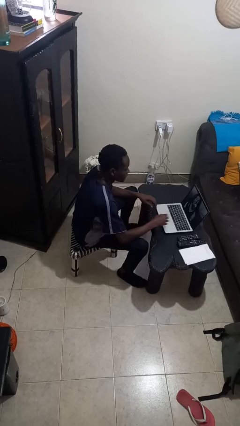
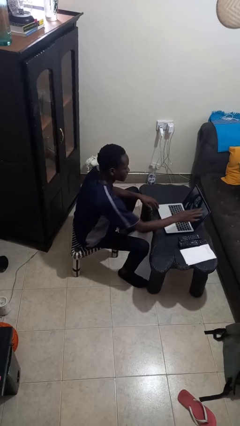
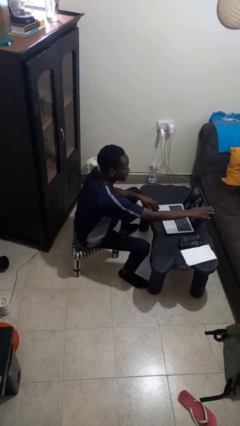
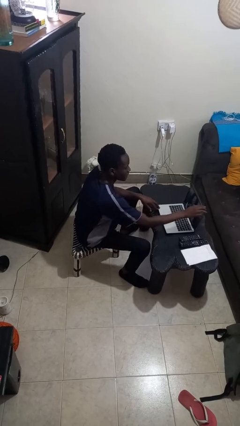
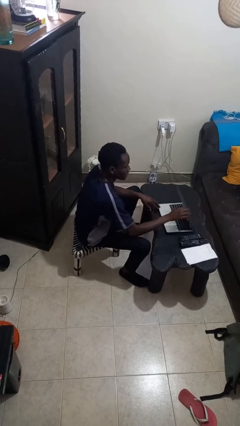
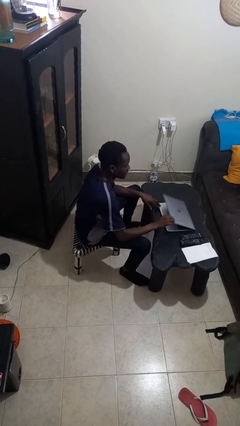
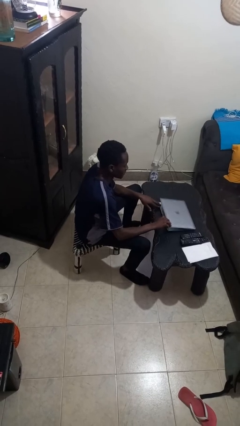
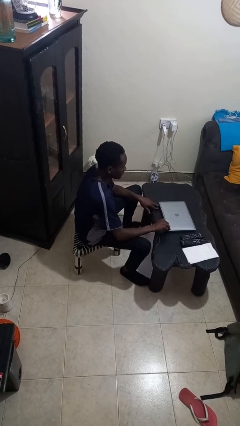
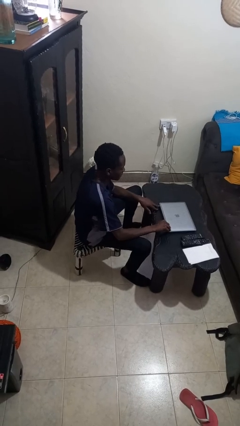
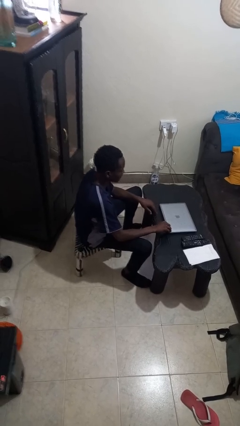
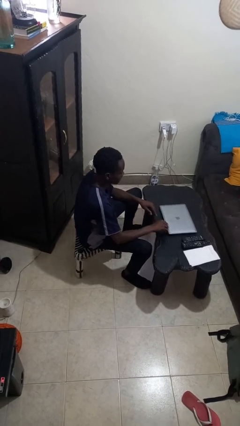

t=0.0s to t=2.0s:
person closes laptop

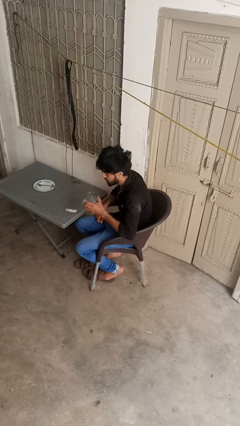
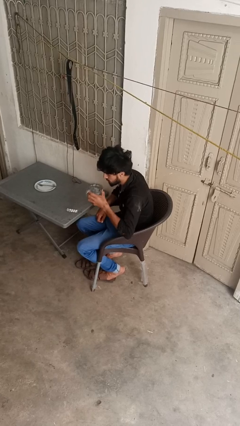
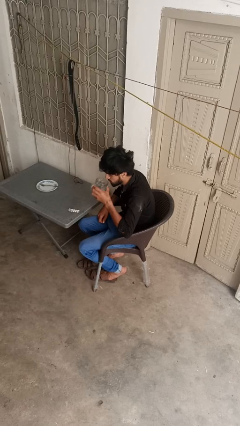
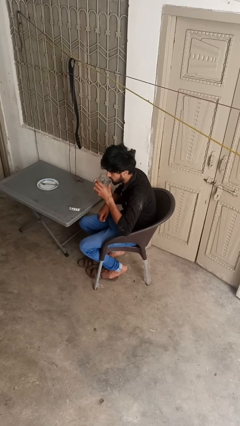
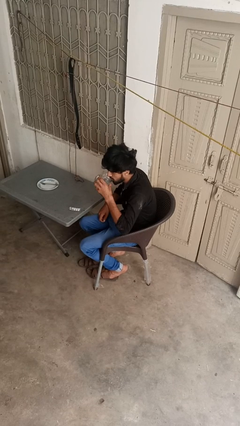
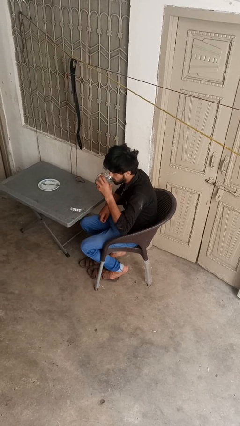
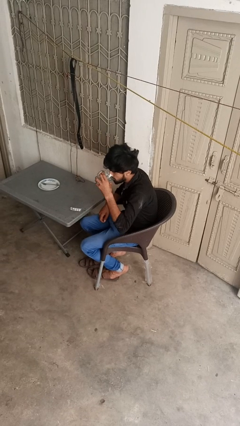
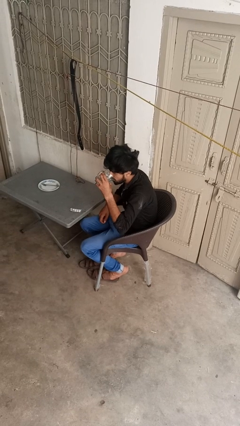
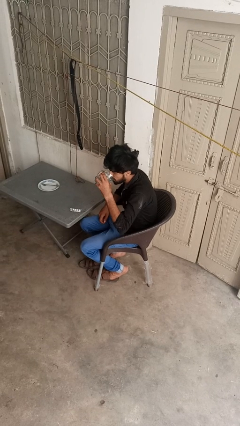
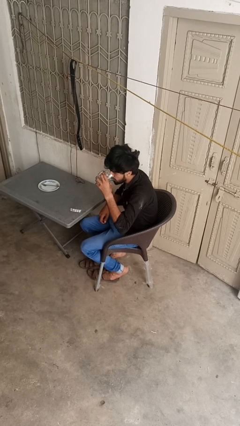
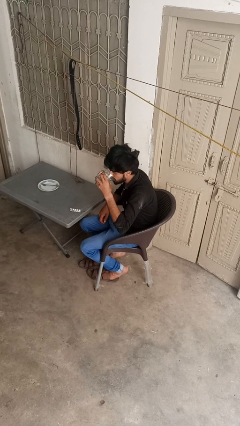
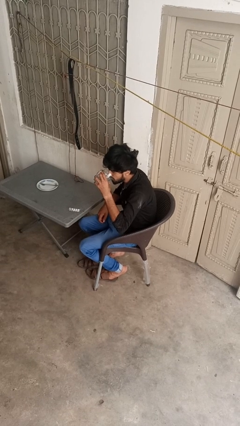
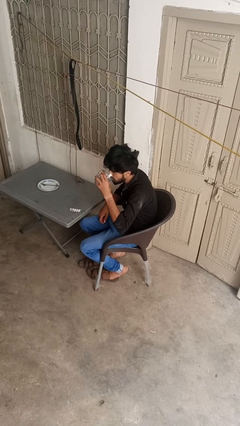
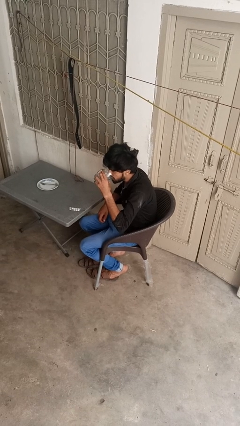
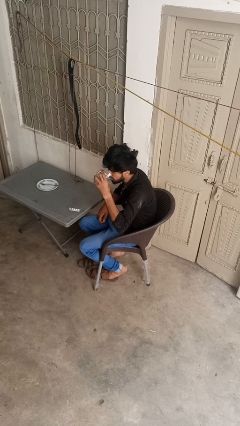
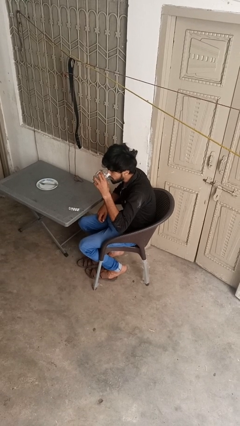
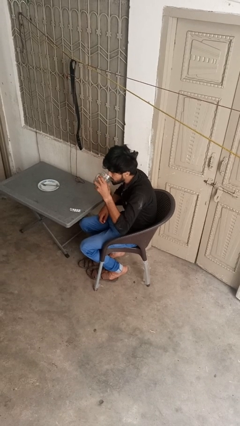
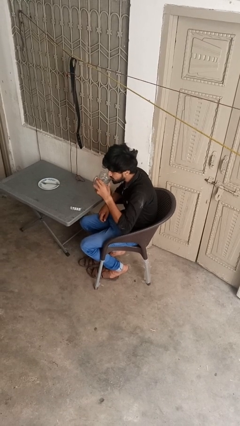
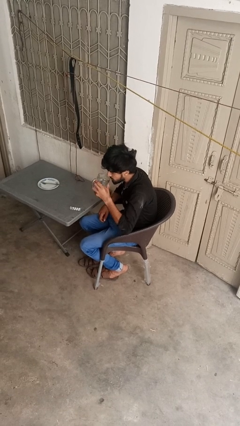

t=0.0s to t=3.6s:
person drinks from cup

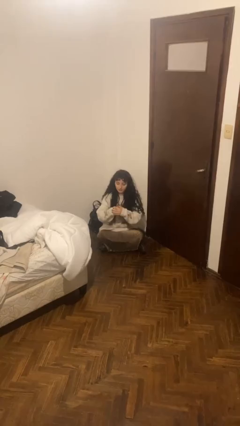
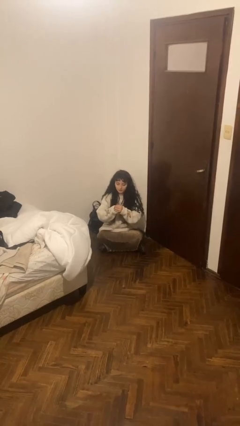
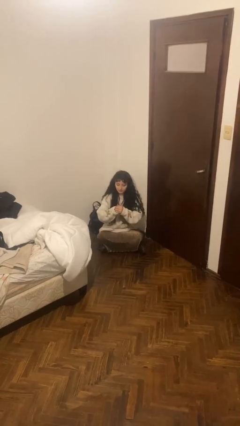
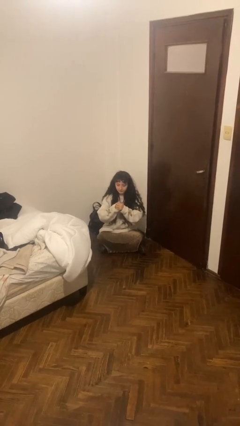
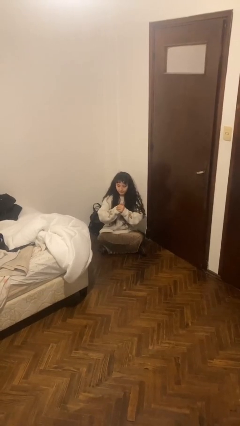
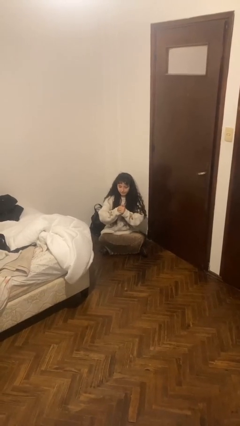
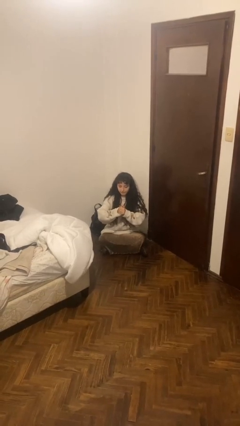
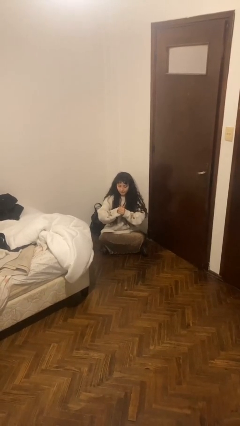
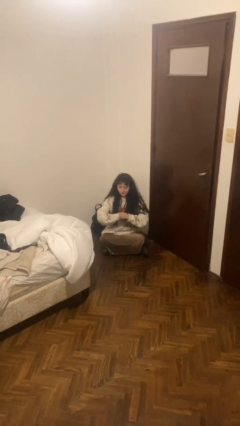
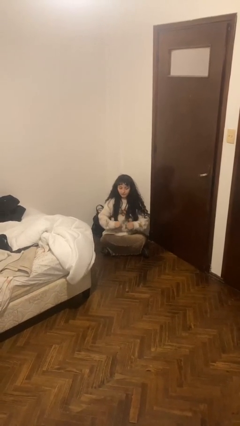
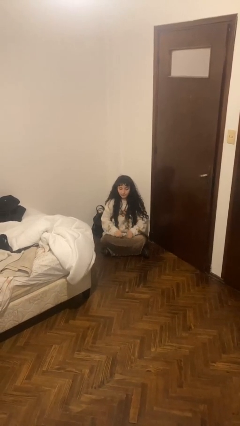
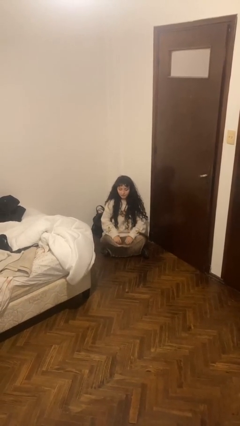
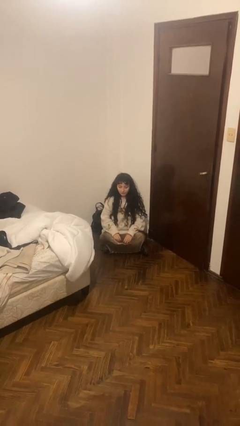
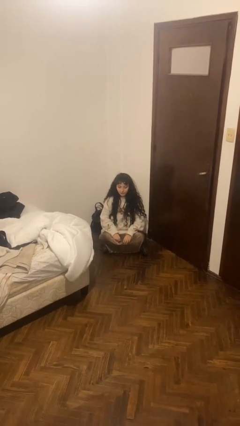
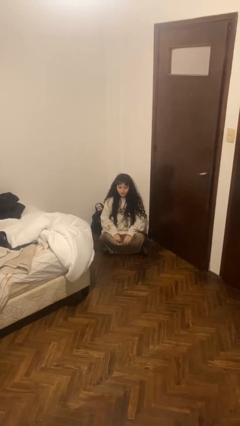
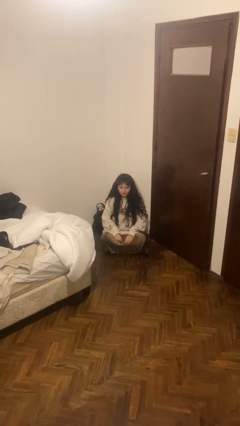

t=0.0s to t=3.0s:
person cracks knuckles

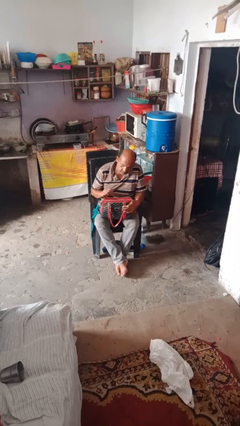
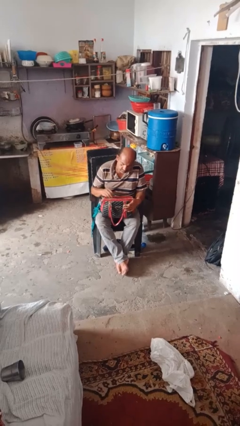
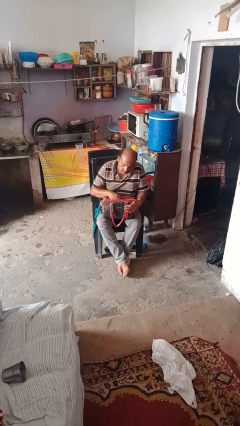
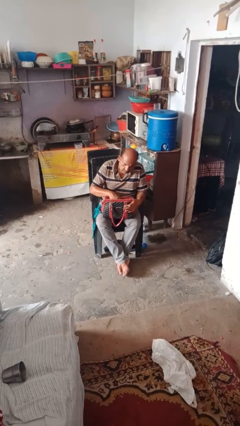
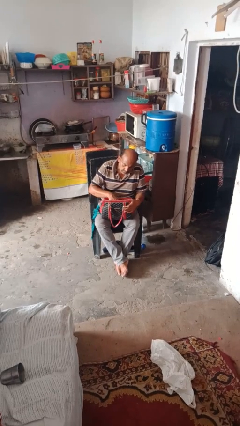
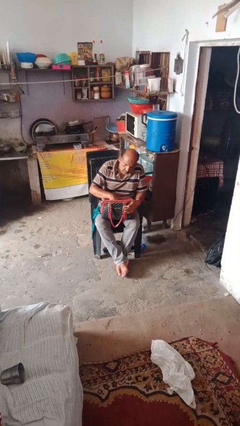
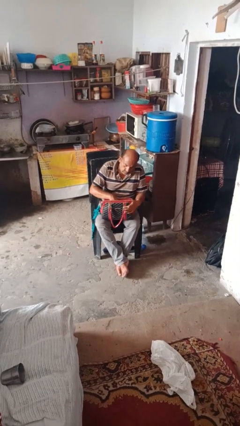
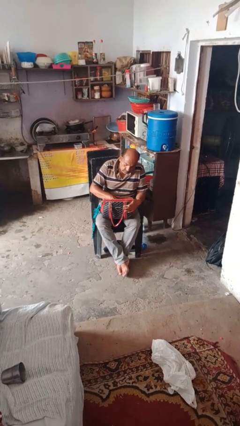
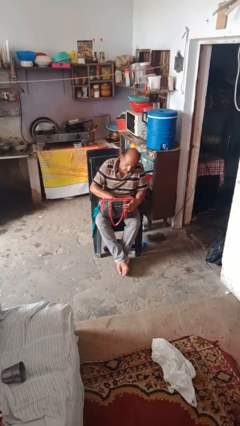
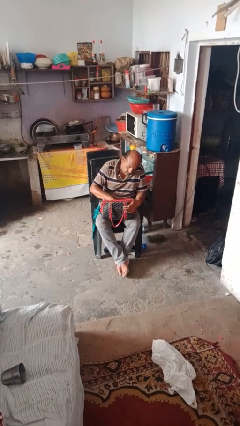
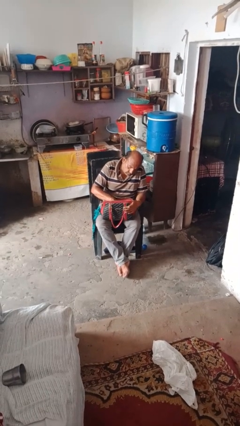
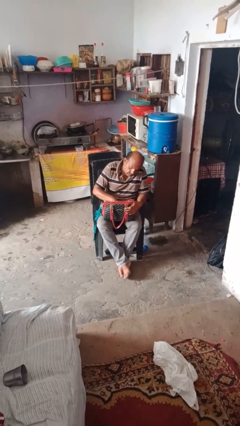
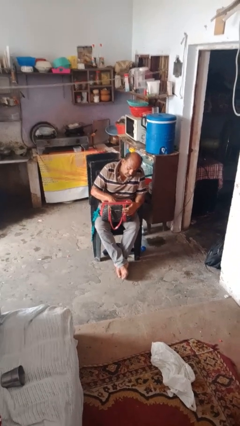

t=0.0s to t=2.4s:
person searches in purse

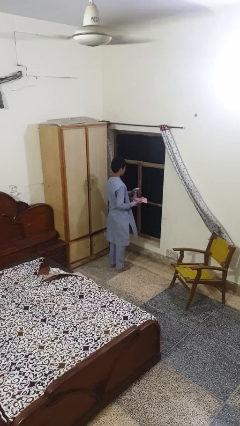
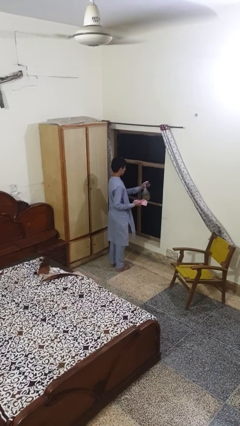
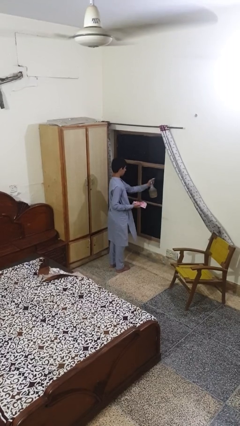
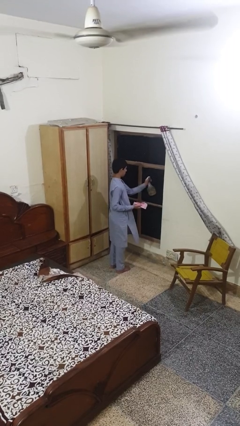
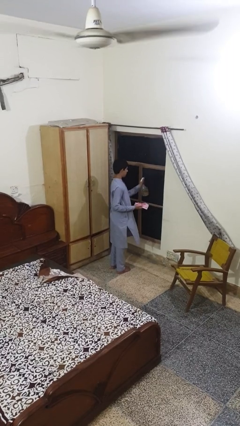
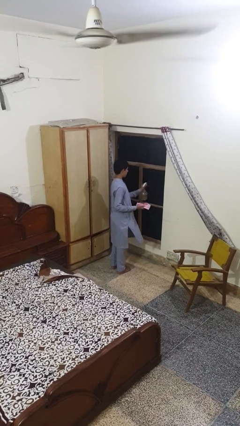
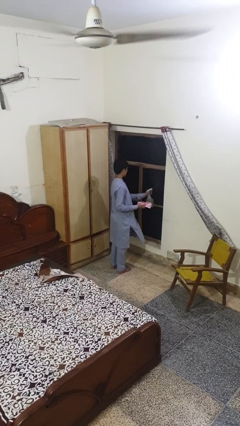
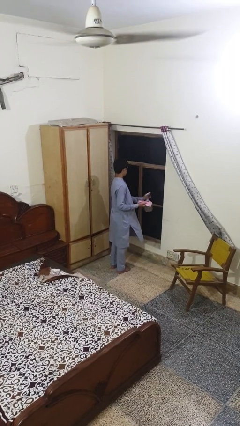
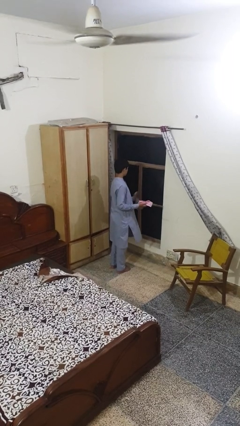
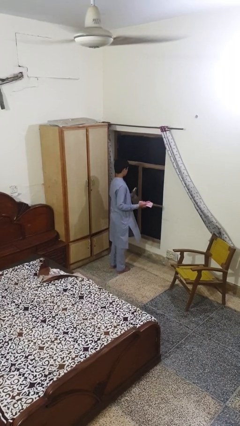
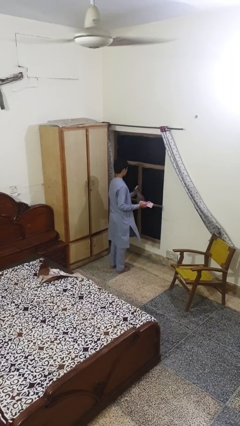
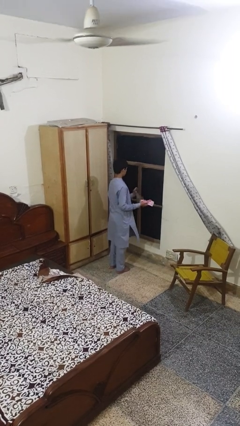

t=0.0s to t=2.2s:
person sprays from bottle

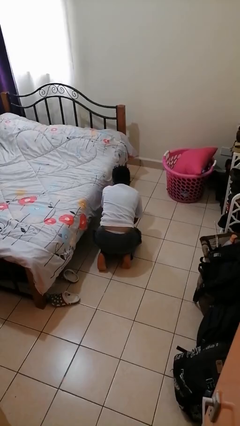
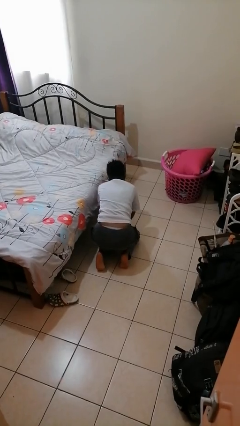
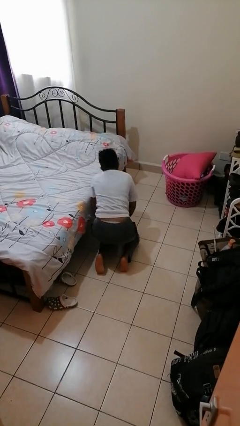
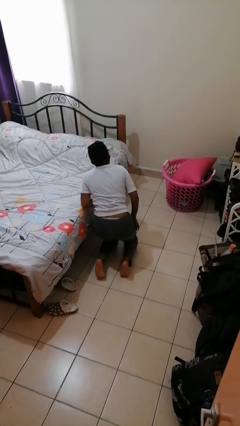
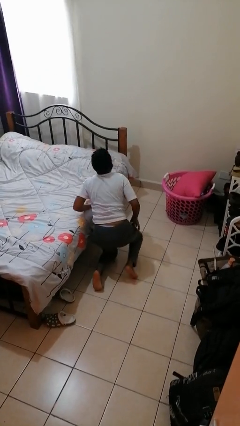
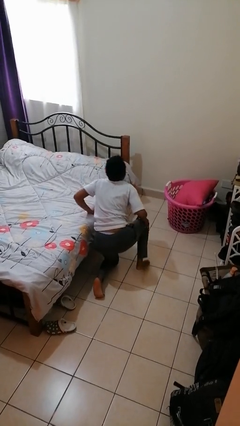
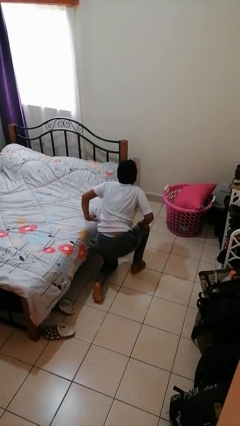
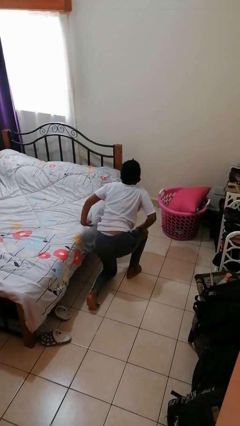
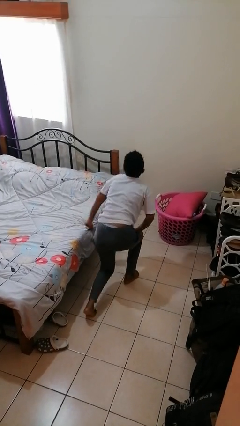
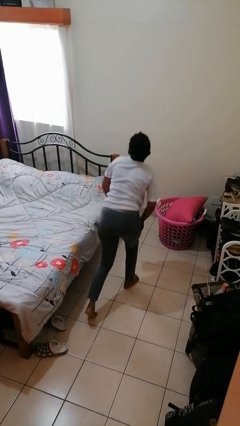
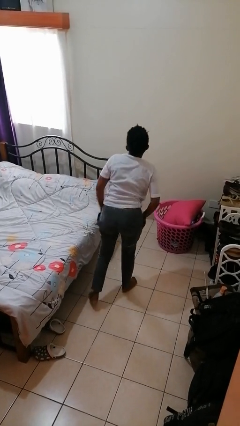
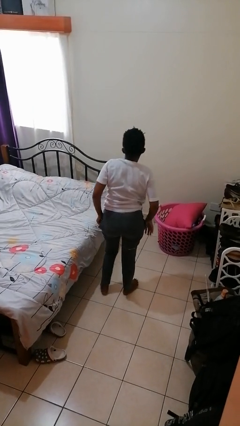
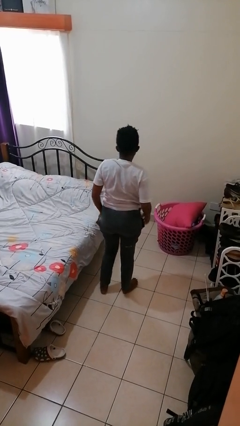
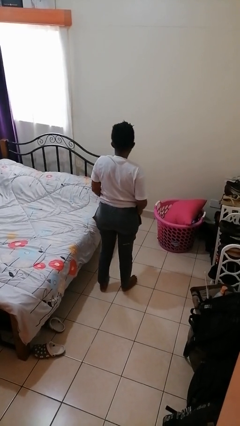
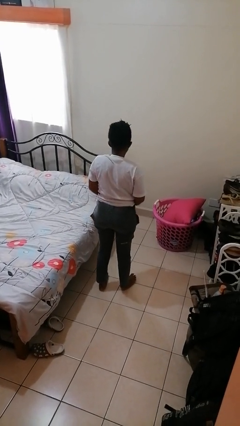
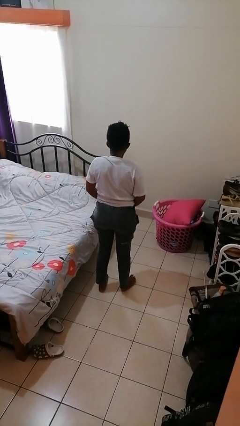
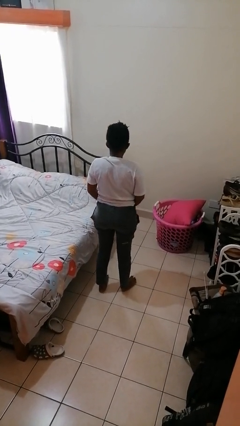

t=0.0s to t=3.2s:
person stands up from floor

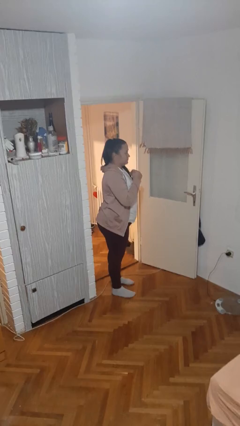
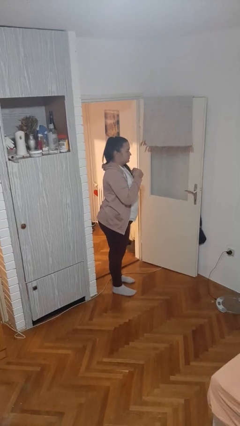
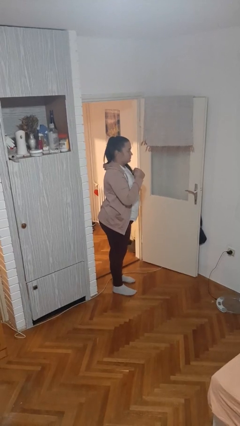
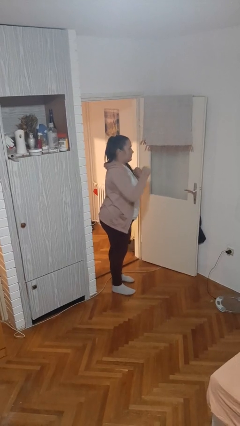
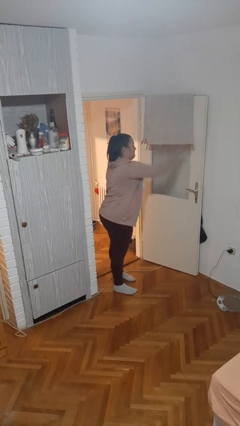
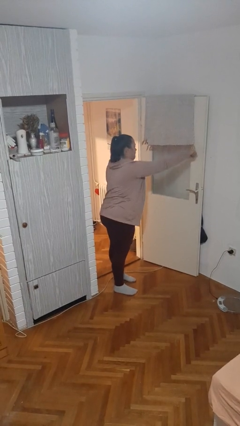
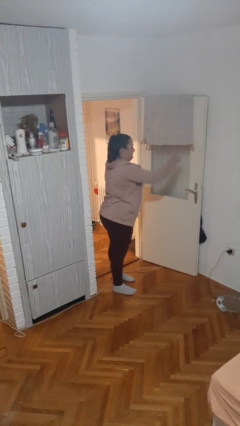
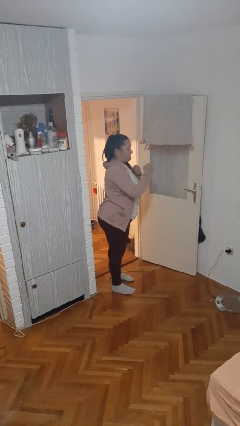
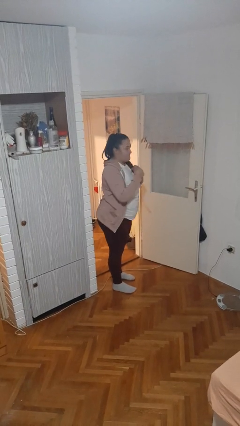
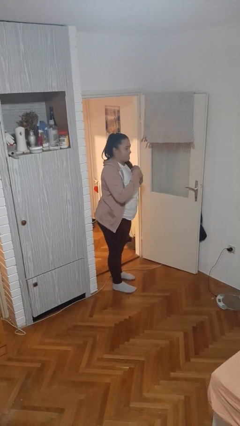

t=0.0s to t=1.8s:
person punches
